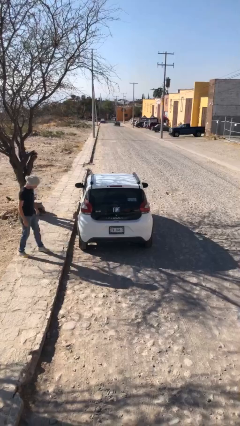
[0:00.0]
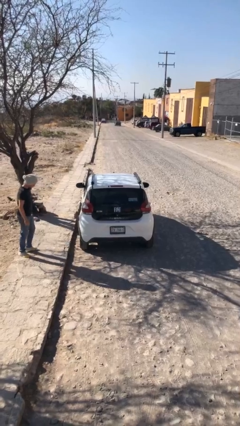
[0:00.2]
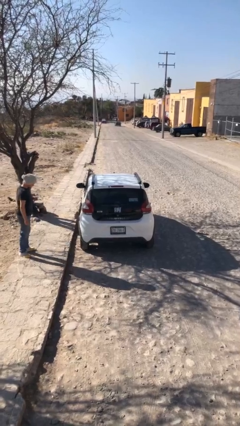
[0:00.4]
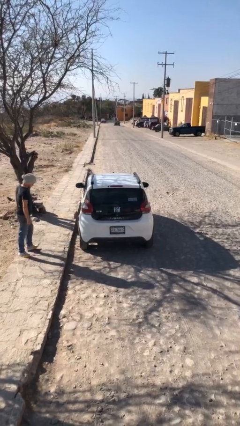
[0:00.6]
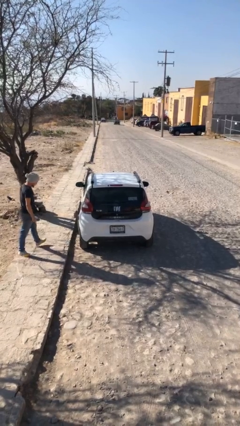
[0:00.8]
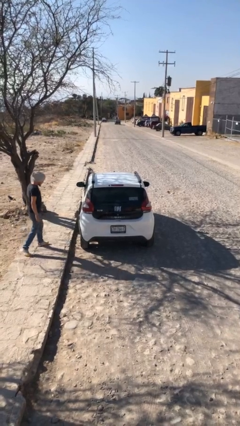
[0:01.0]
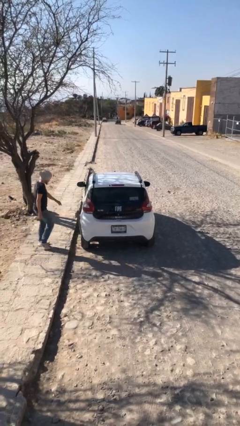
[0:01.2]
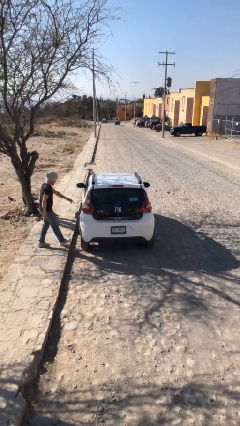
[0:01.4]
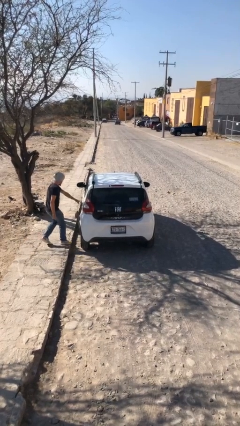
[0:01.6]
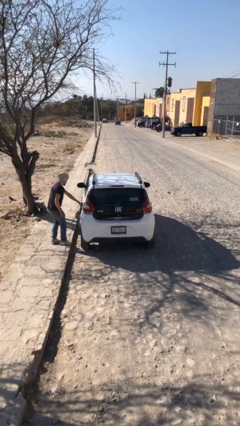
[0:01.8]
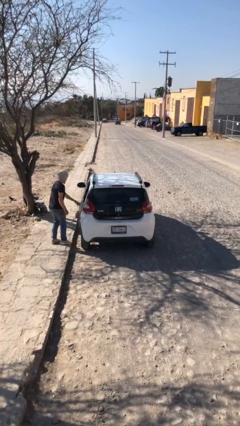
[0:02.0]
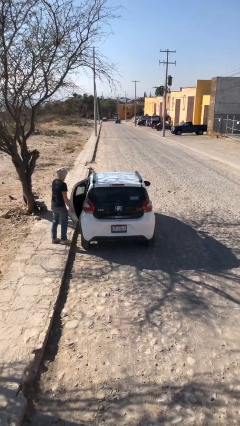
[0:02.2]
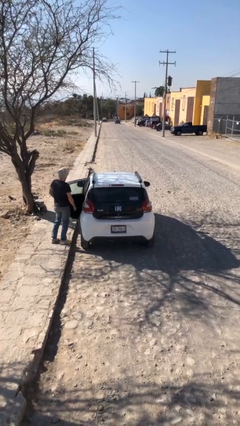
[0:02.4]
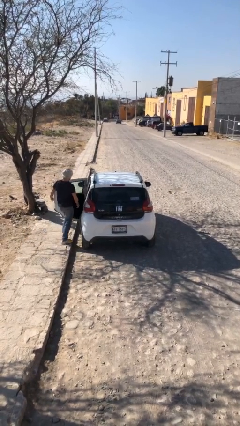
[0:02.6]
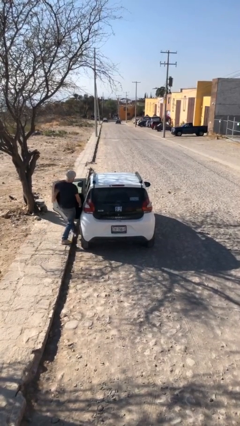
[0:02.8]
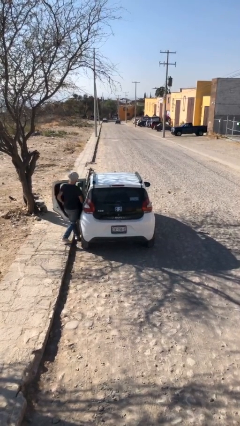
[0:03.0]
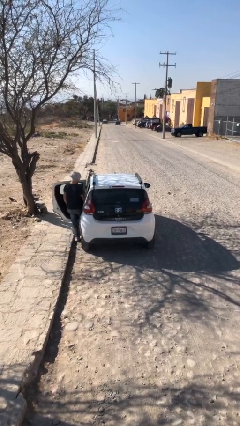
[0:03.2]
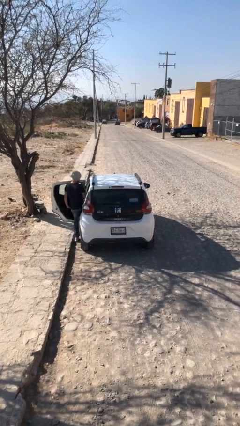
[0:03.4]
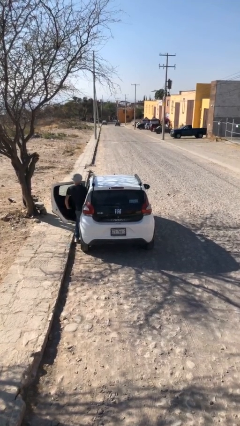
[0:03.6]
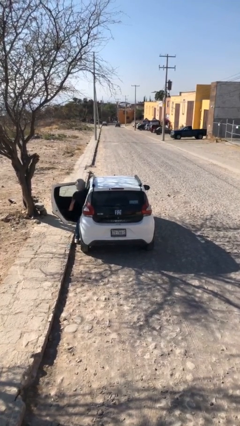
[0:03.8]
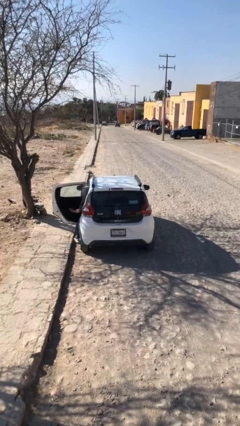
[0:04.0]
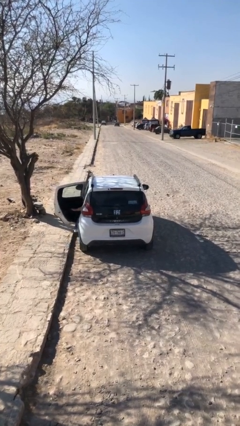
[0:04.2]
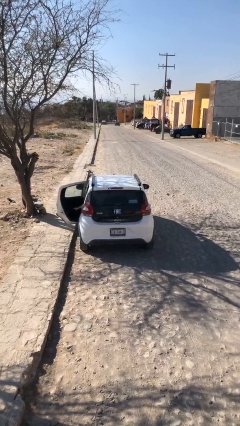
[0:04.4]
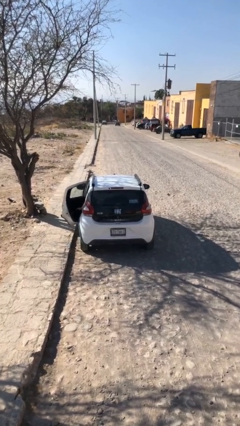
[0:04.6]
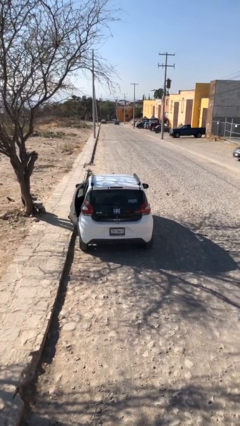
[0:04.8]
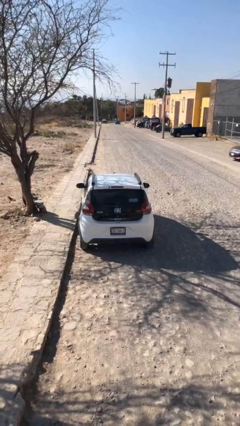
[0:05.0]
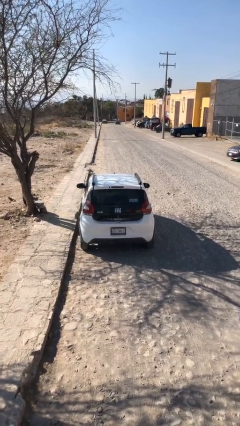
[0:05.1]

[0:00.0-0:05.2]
car picks up person

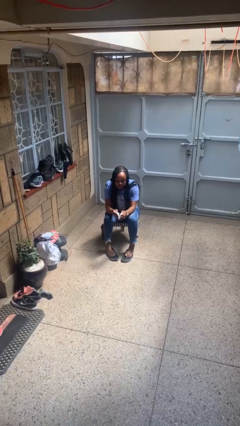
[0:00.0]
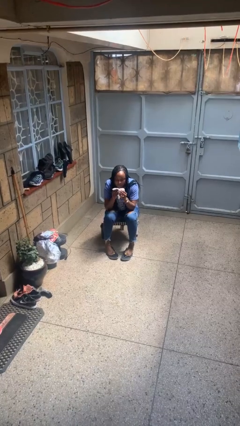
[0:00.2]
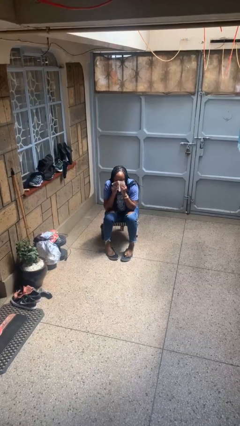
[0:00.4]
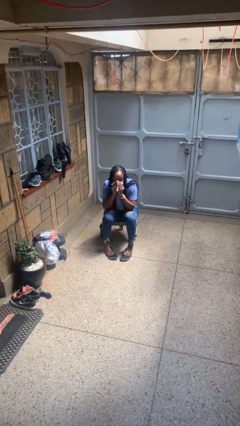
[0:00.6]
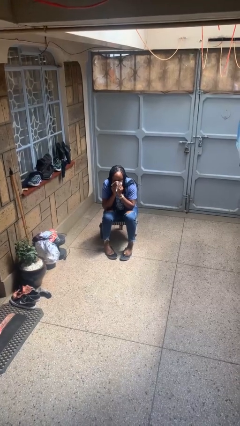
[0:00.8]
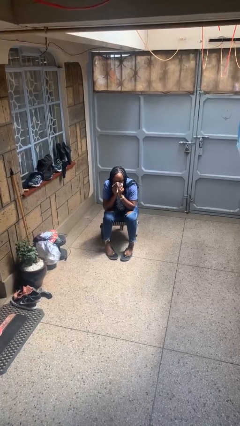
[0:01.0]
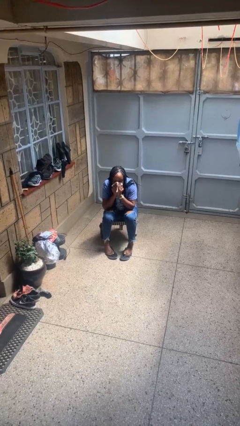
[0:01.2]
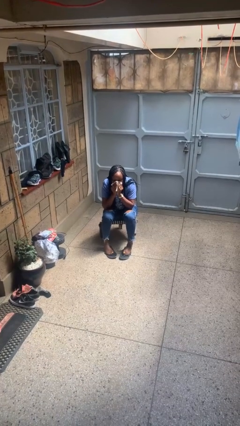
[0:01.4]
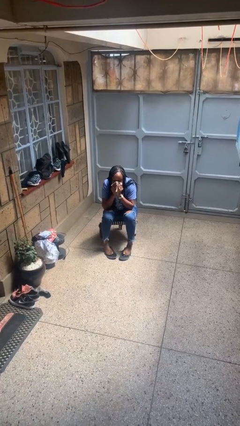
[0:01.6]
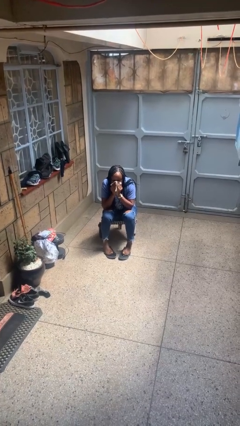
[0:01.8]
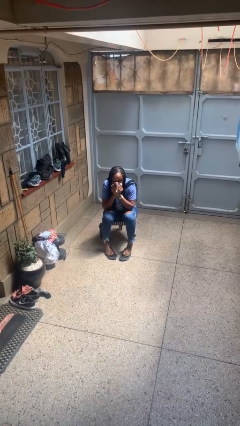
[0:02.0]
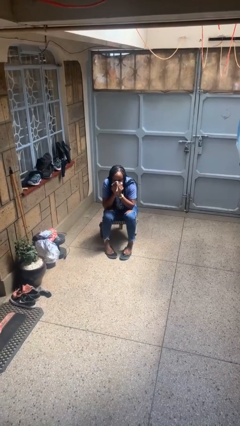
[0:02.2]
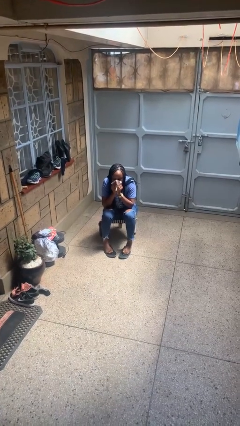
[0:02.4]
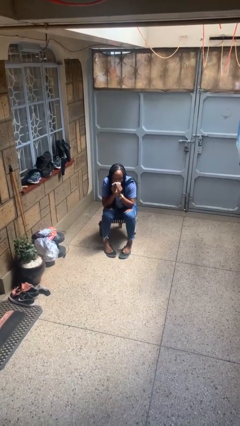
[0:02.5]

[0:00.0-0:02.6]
person blows nose

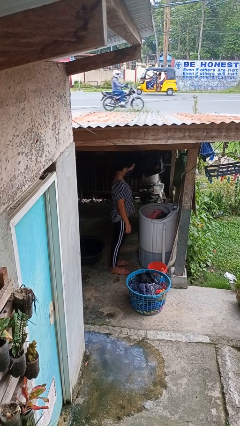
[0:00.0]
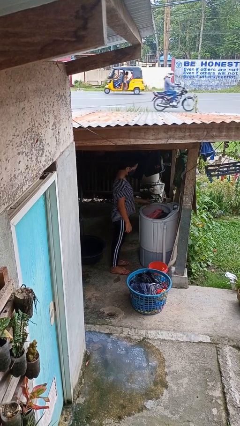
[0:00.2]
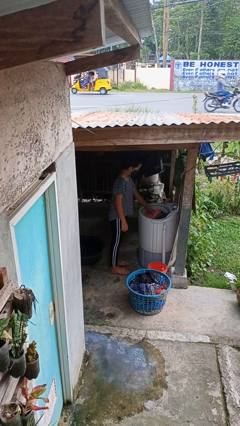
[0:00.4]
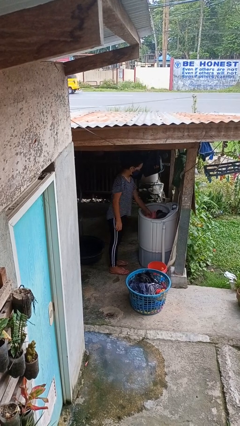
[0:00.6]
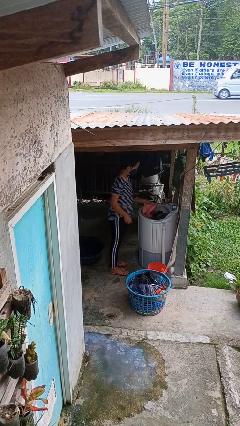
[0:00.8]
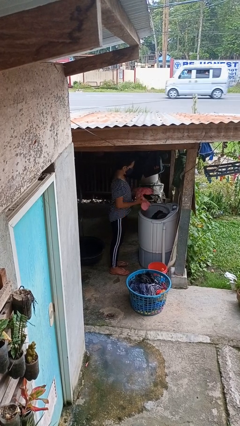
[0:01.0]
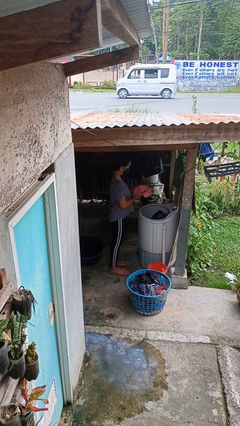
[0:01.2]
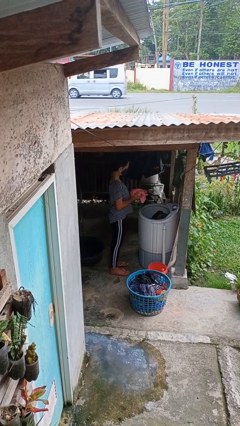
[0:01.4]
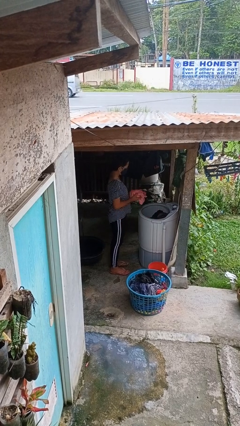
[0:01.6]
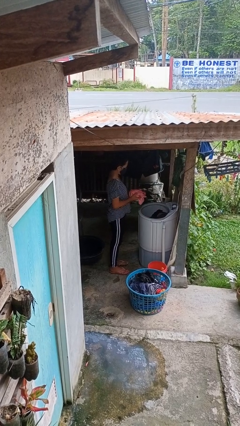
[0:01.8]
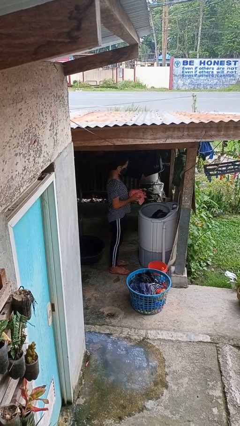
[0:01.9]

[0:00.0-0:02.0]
person unloads clotheswasher

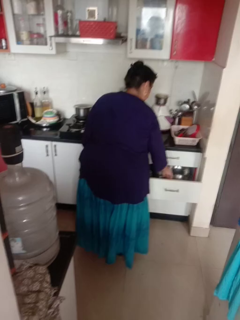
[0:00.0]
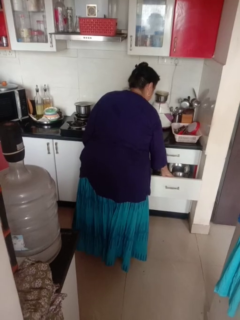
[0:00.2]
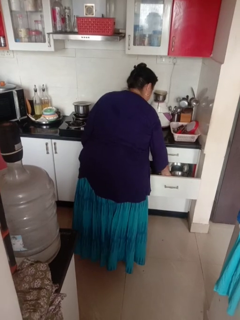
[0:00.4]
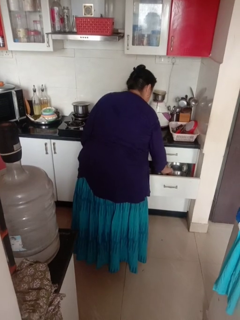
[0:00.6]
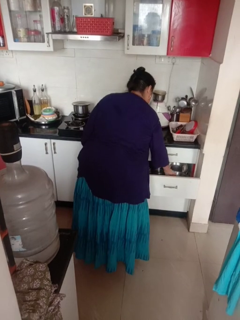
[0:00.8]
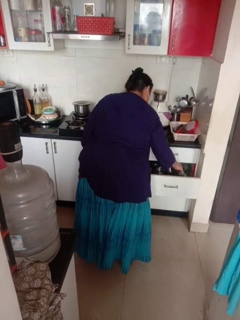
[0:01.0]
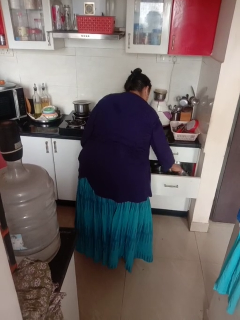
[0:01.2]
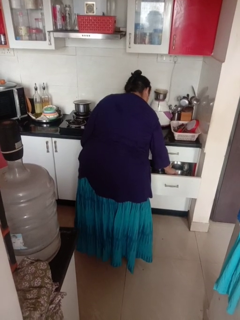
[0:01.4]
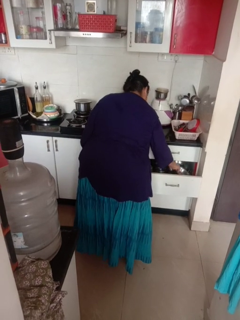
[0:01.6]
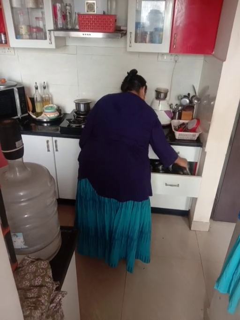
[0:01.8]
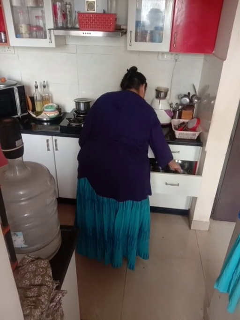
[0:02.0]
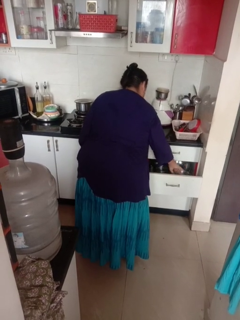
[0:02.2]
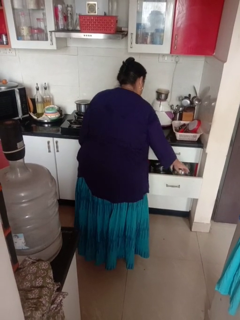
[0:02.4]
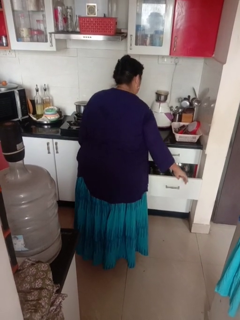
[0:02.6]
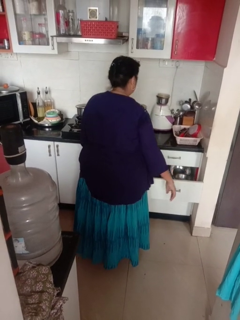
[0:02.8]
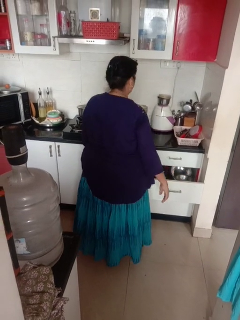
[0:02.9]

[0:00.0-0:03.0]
person searches in kitchen drawer

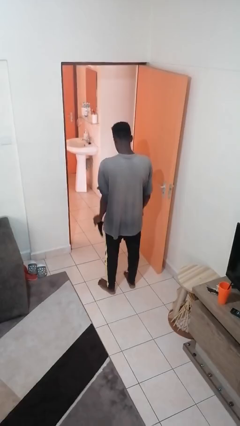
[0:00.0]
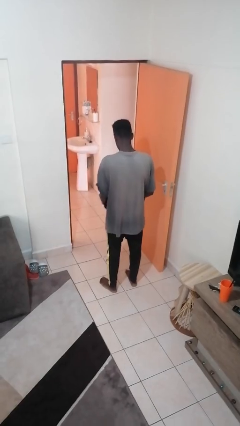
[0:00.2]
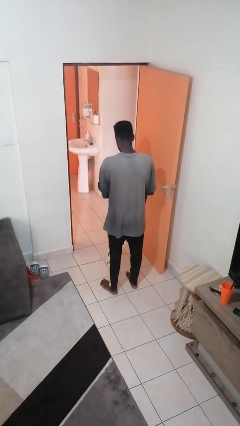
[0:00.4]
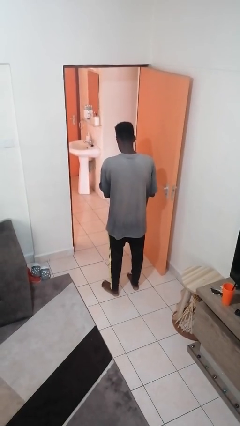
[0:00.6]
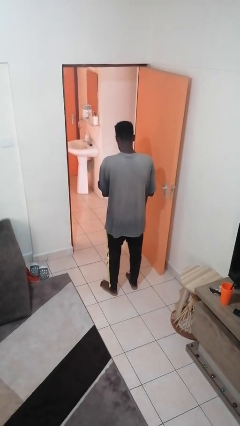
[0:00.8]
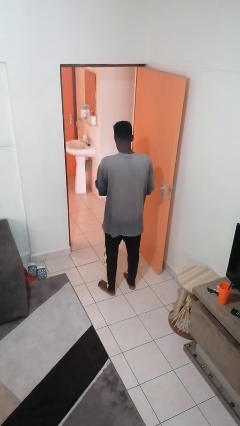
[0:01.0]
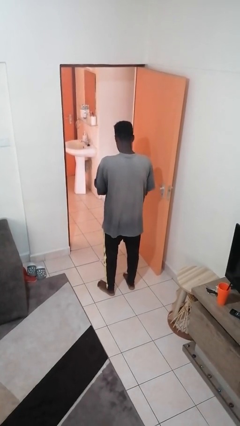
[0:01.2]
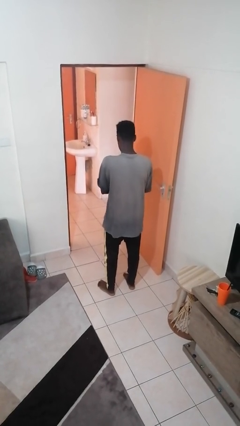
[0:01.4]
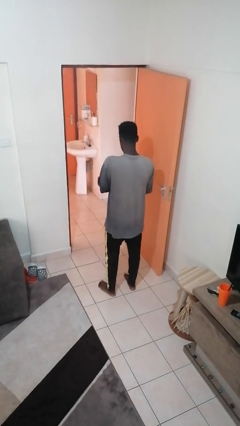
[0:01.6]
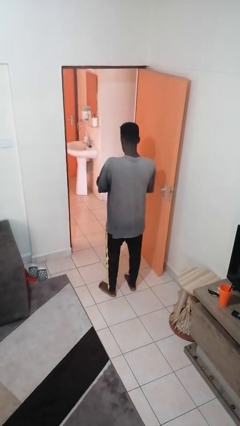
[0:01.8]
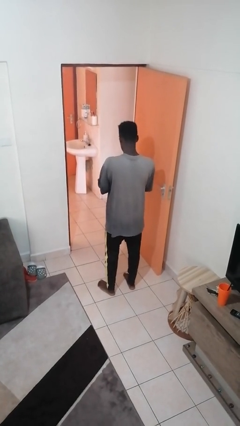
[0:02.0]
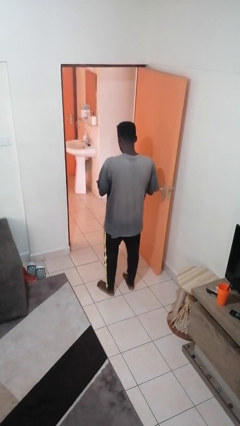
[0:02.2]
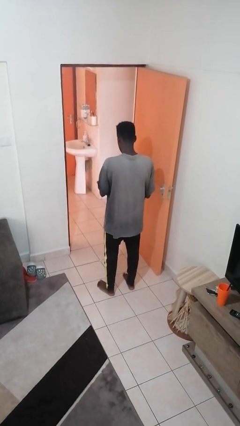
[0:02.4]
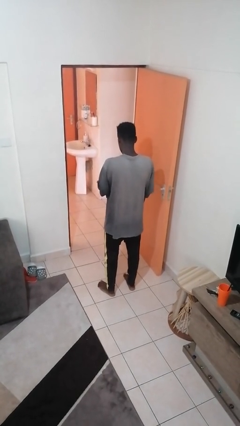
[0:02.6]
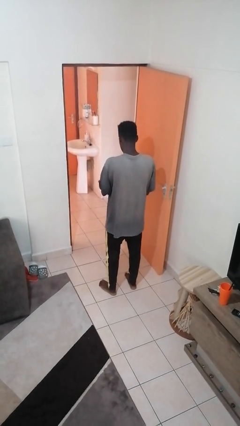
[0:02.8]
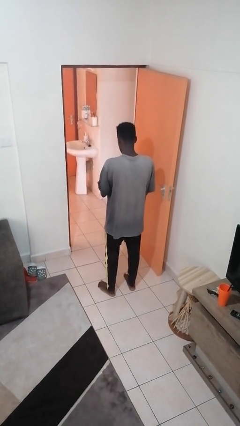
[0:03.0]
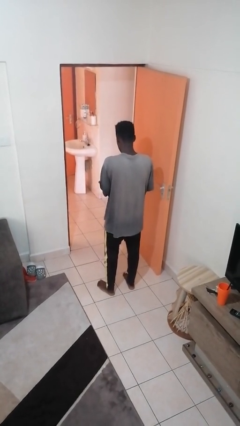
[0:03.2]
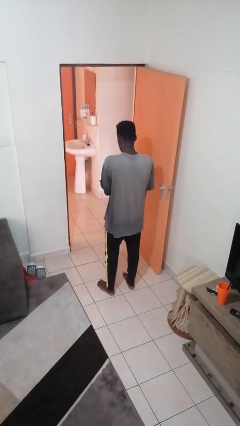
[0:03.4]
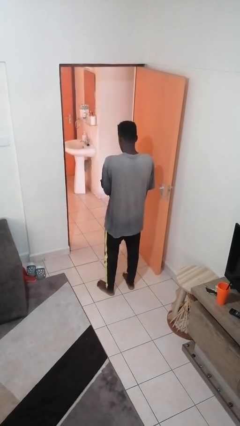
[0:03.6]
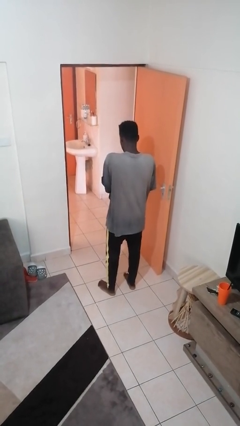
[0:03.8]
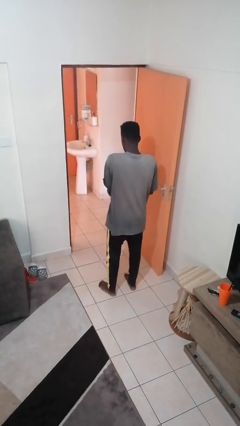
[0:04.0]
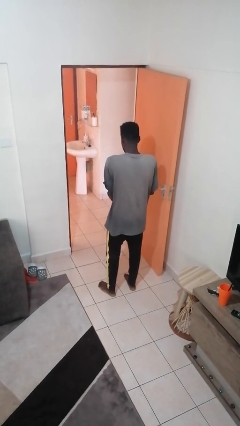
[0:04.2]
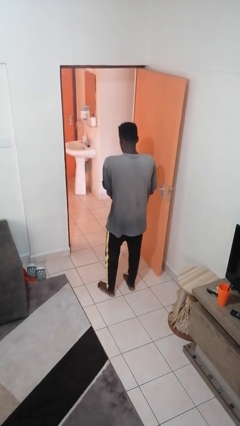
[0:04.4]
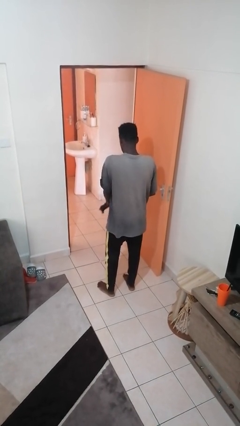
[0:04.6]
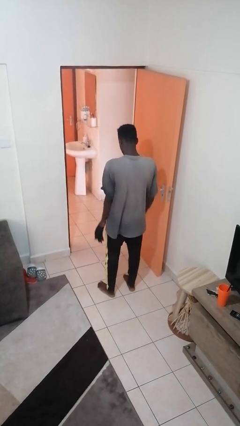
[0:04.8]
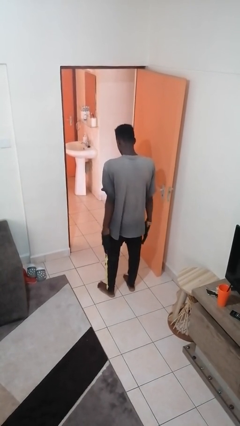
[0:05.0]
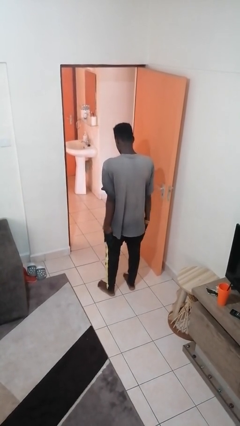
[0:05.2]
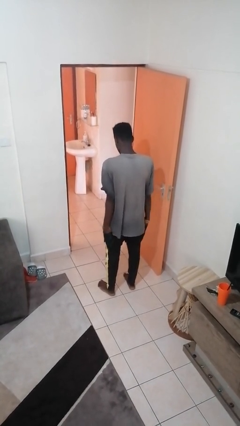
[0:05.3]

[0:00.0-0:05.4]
person puts on gloves
